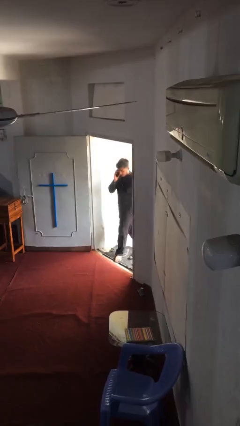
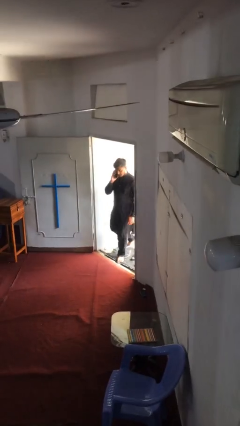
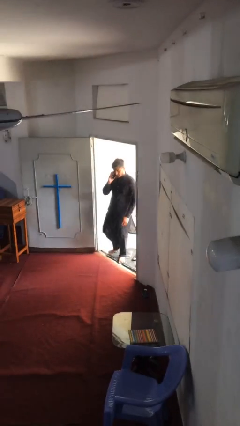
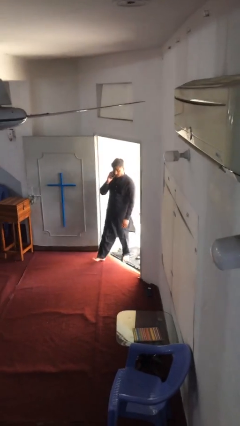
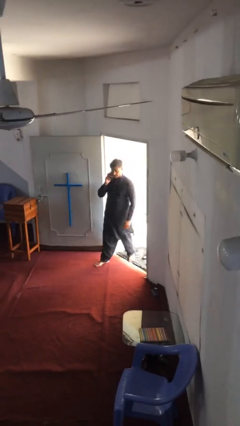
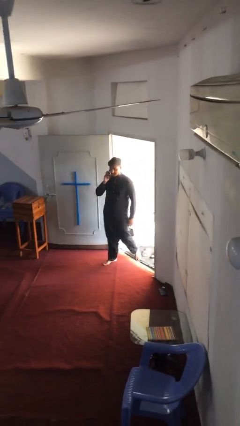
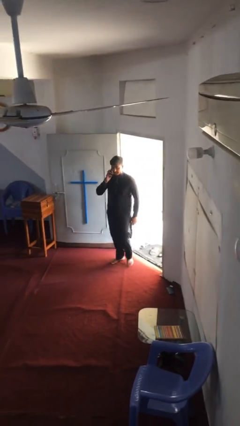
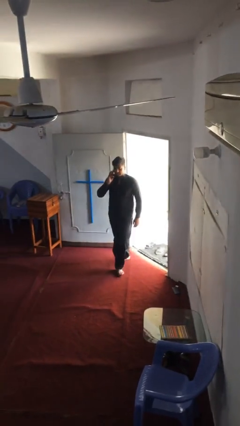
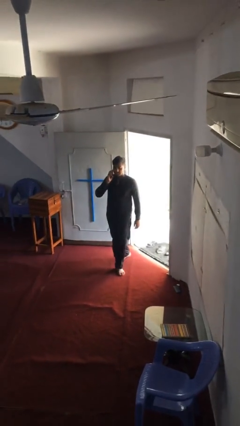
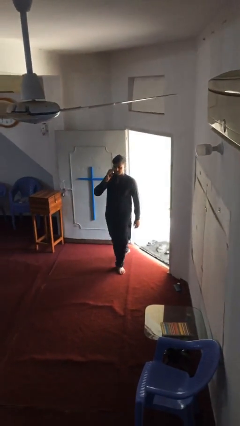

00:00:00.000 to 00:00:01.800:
person enters scene through structure

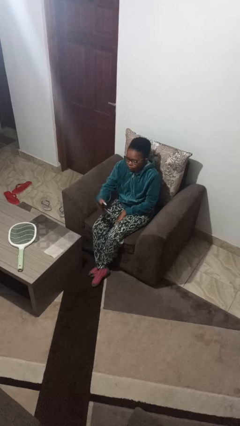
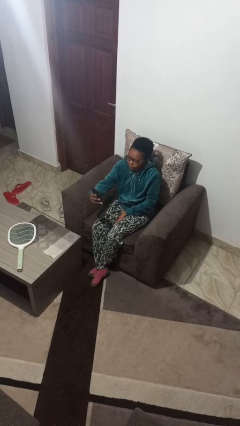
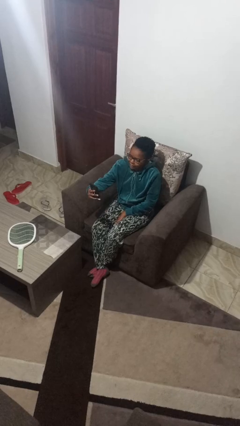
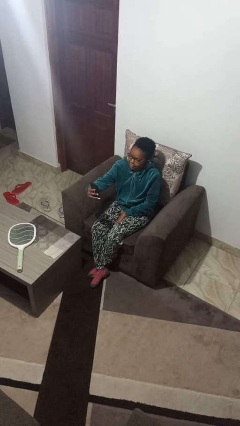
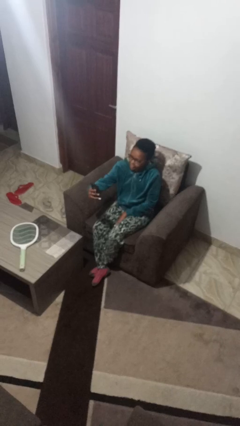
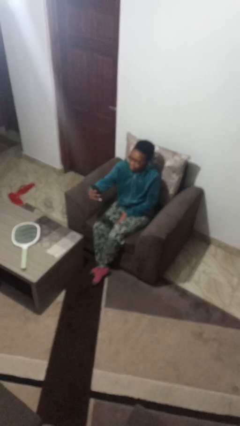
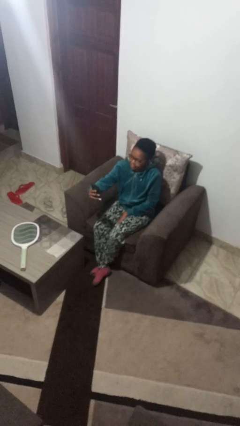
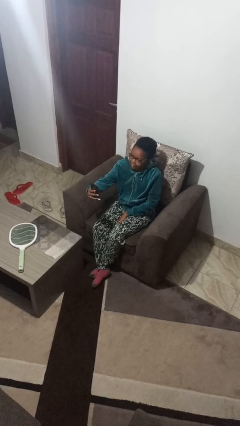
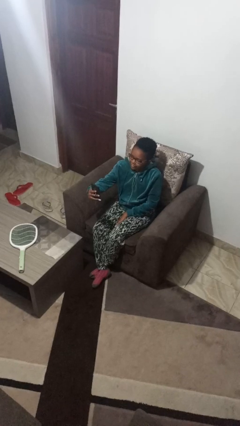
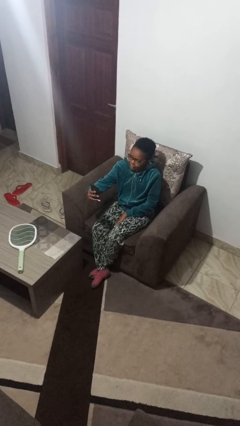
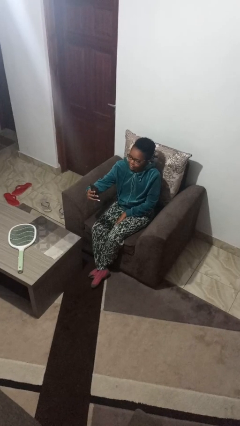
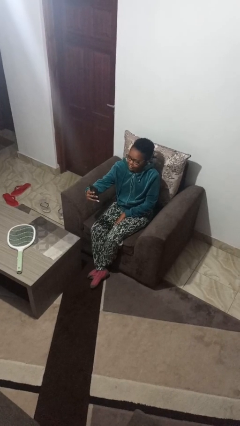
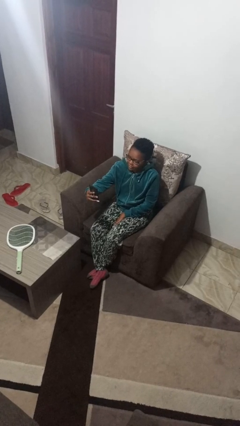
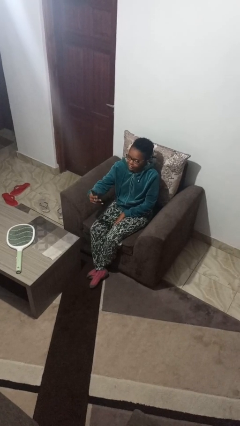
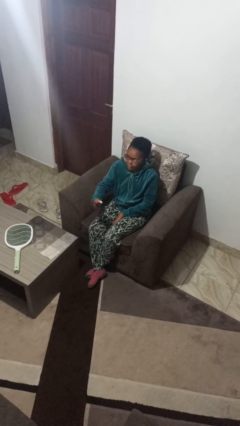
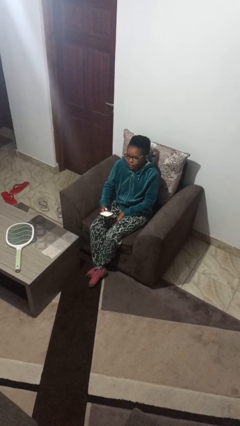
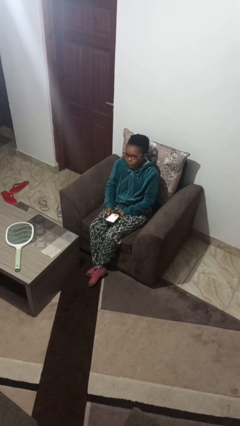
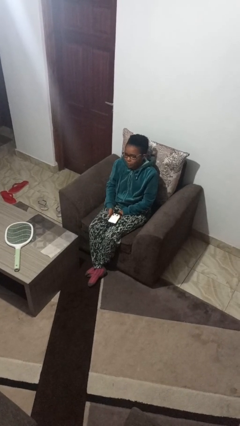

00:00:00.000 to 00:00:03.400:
person takes selfie

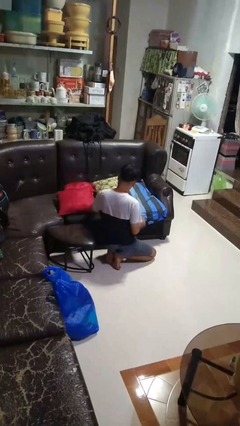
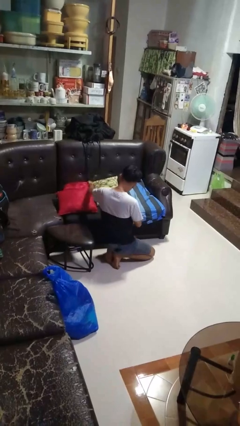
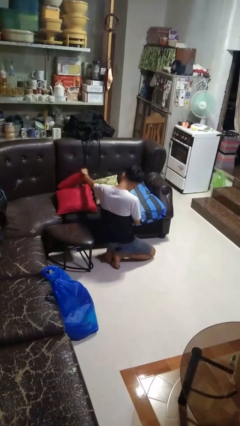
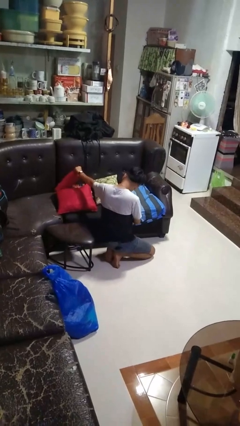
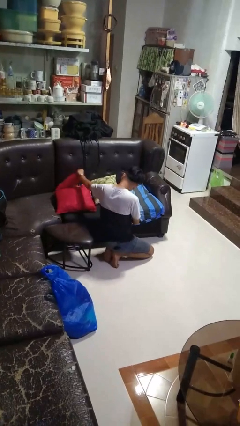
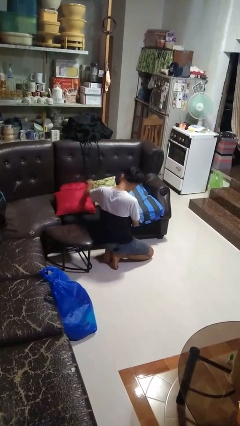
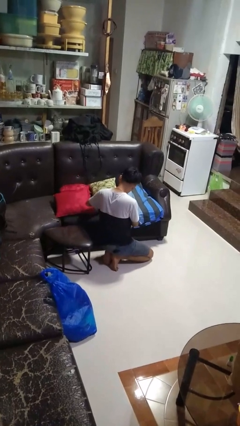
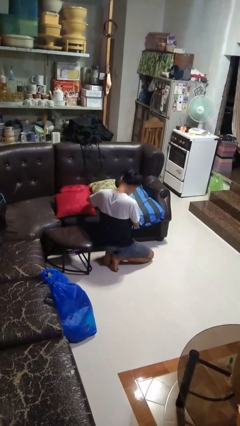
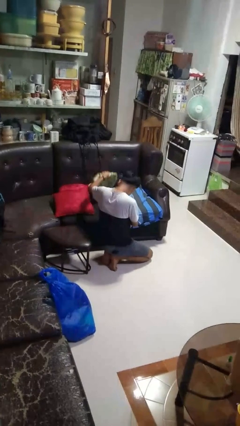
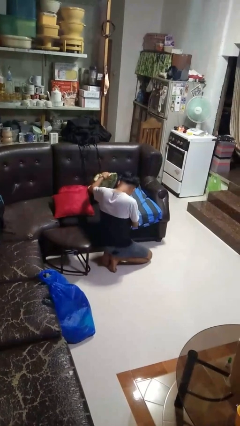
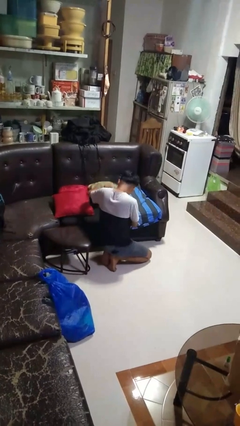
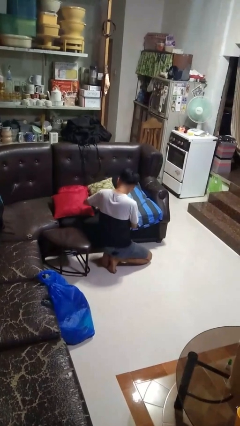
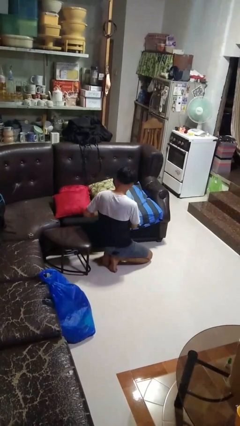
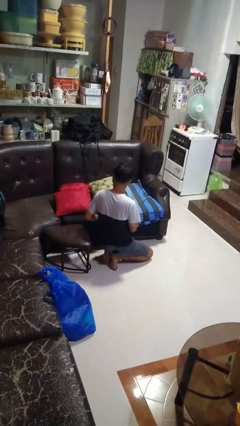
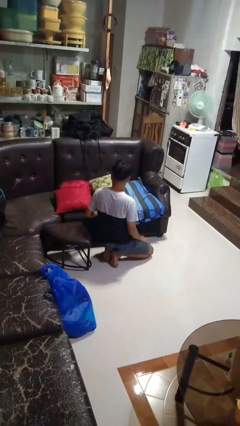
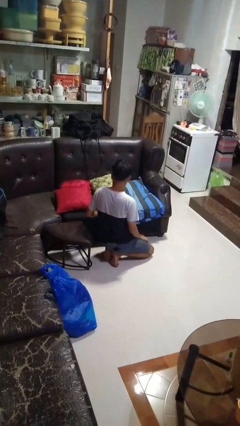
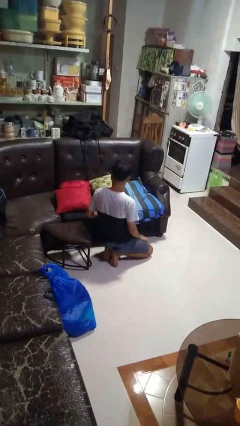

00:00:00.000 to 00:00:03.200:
person searches in couch

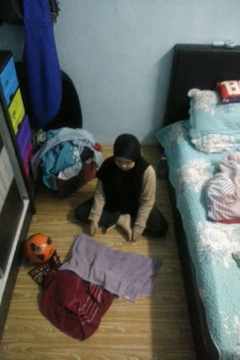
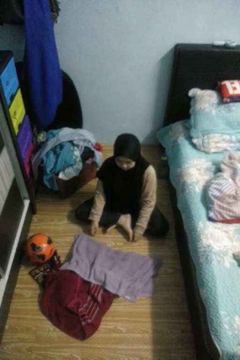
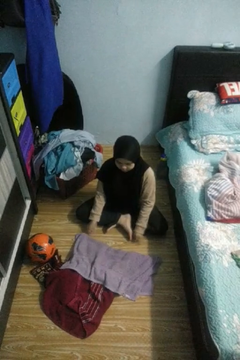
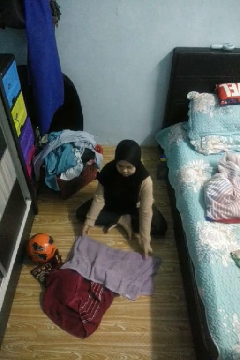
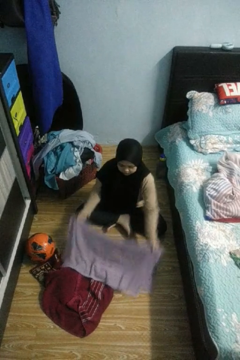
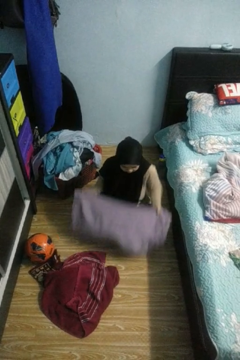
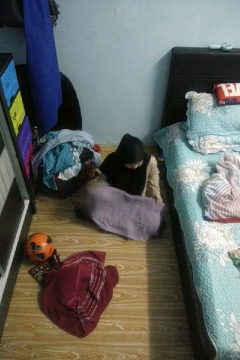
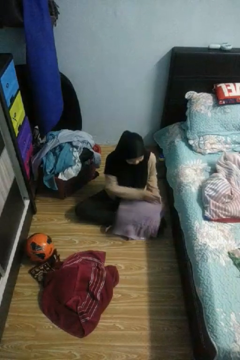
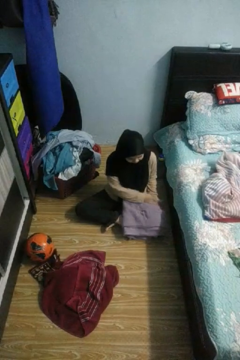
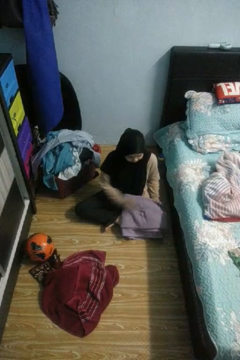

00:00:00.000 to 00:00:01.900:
person folds towel

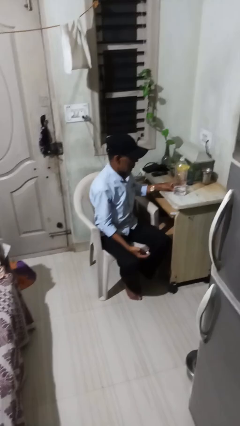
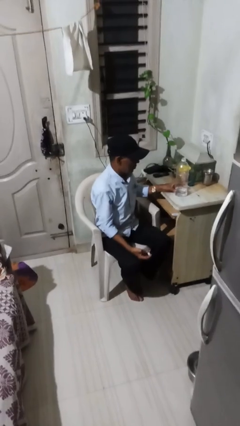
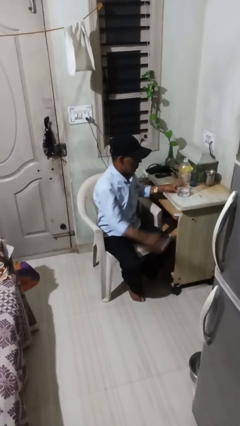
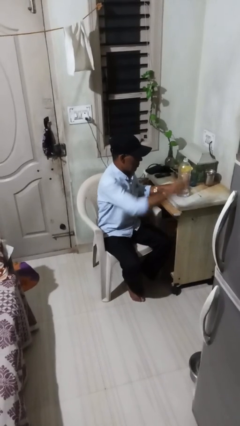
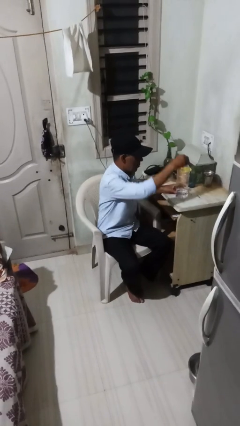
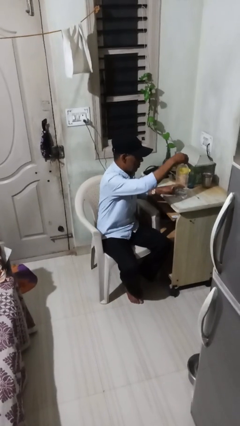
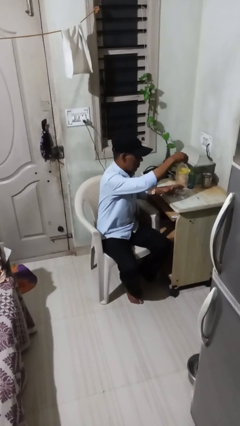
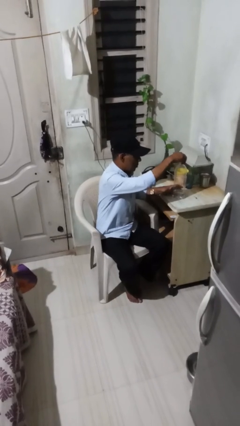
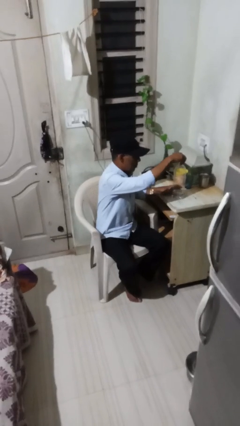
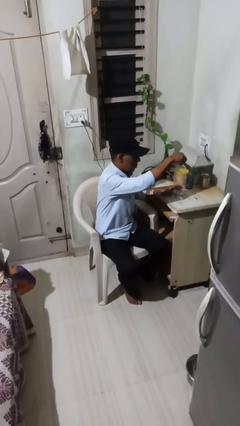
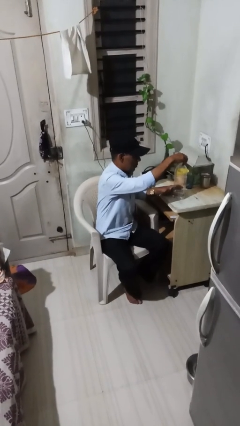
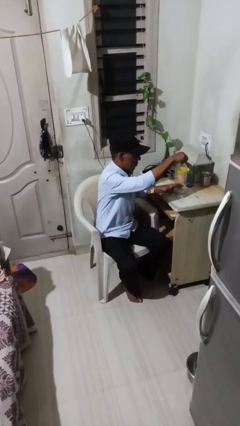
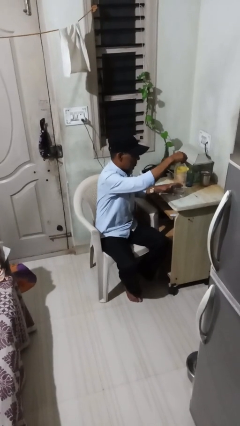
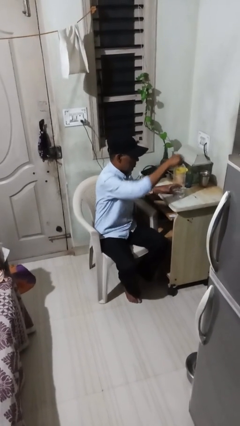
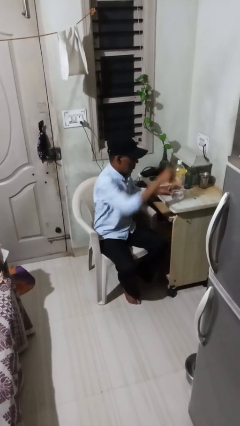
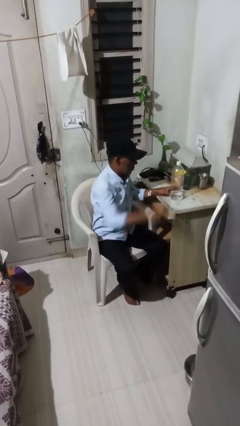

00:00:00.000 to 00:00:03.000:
person screws lid to bottle

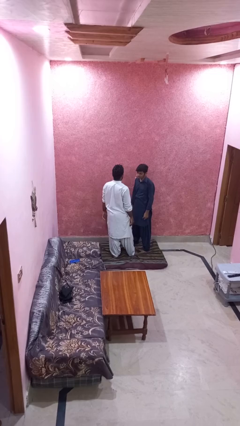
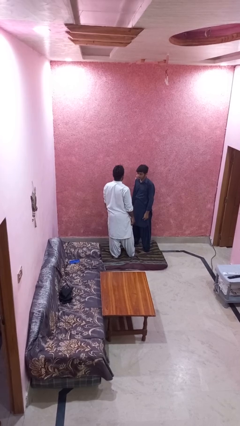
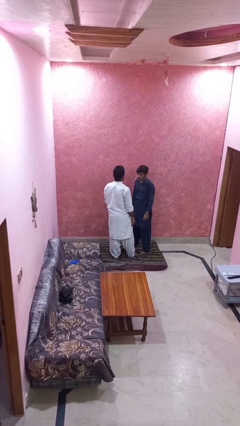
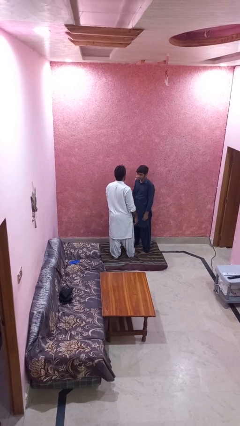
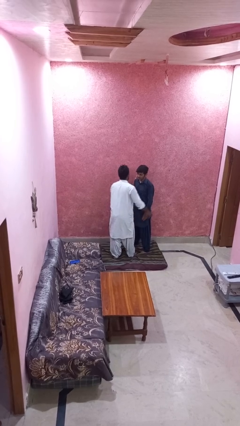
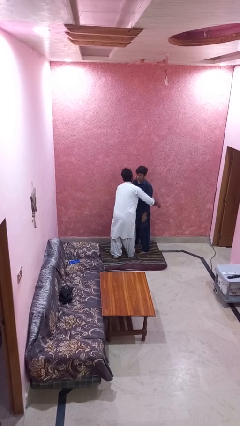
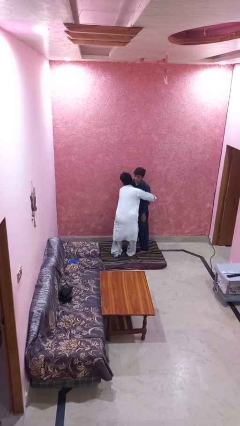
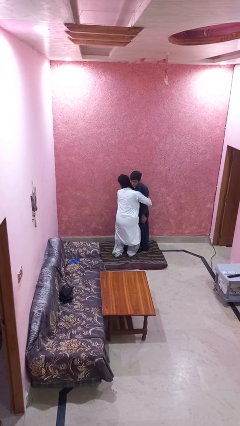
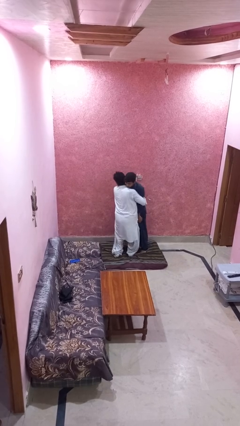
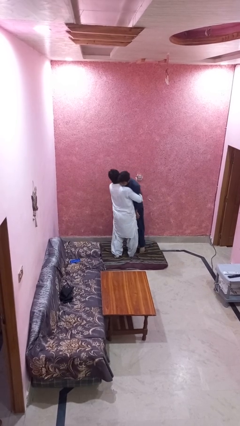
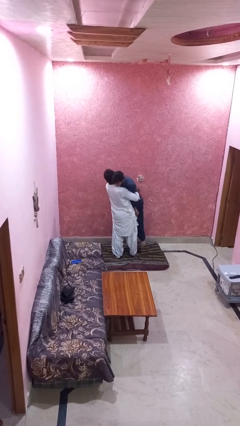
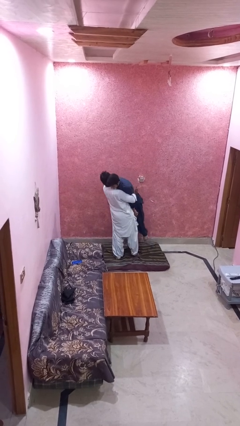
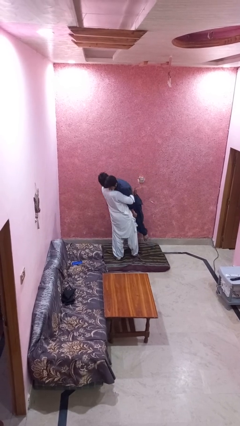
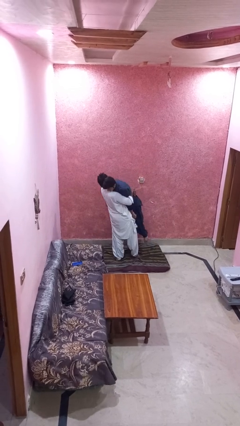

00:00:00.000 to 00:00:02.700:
person picks up person

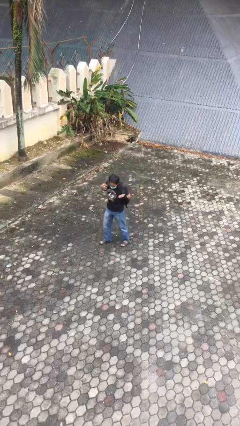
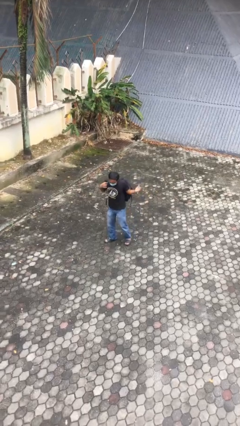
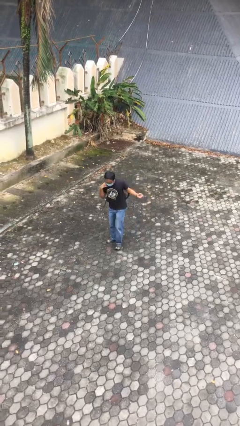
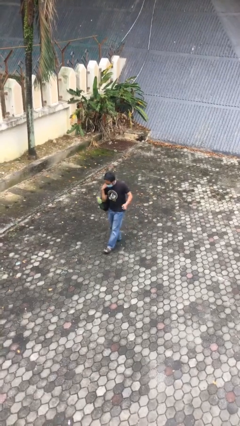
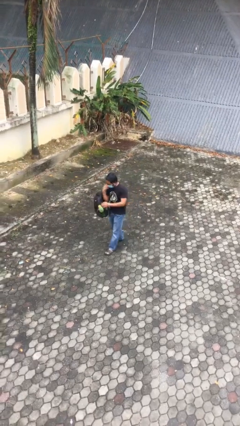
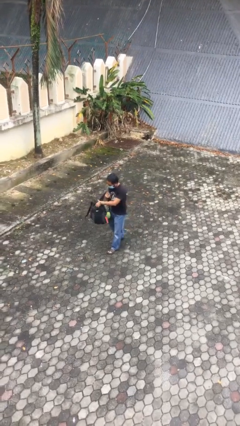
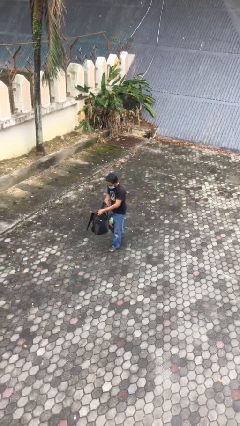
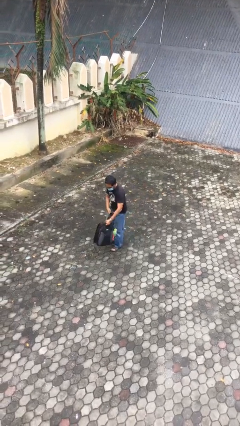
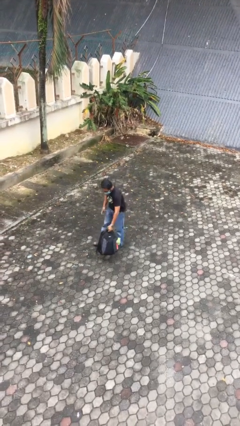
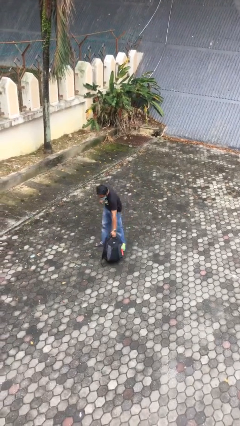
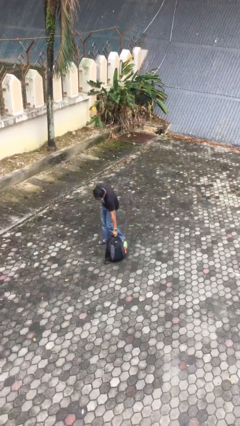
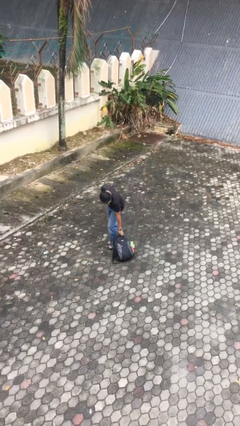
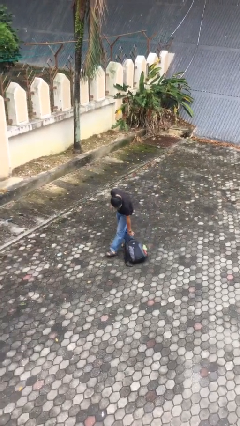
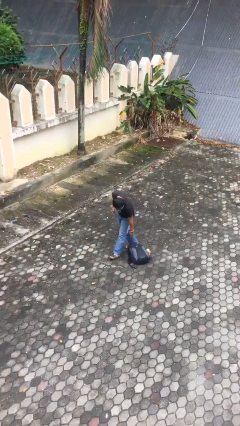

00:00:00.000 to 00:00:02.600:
person puts down object on floor
